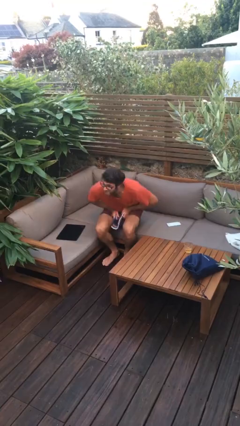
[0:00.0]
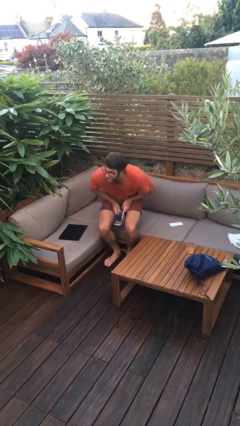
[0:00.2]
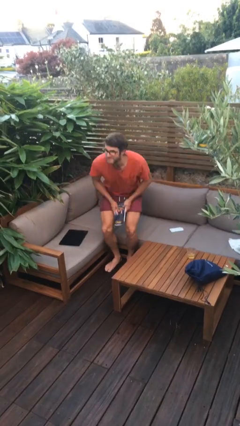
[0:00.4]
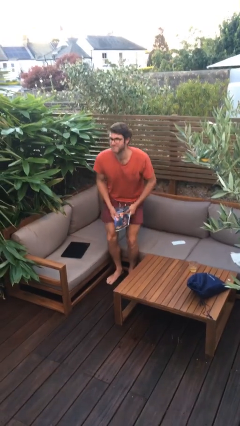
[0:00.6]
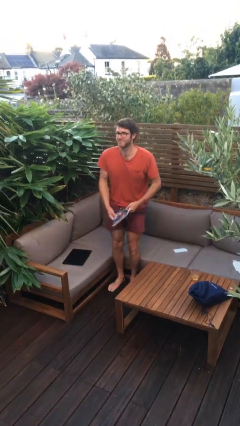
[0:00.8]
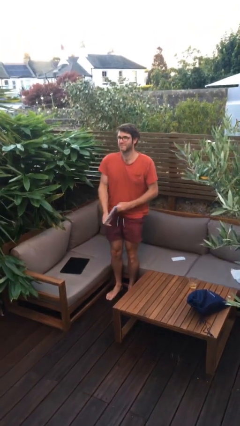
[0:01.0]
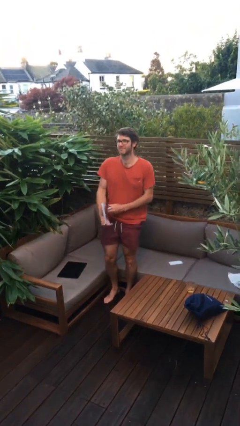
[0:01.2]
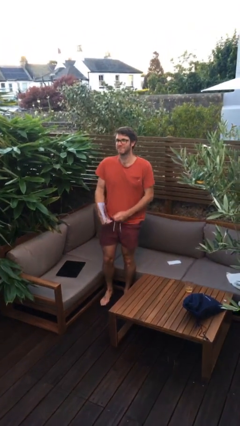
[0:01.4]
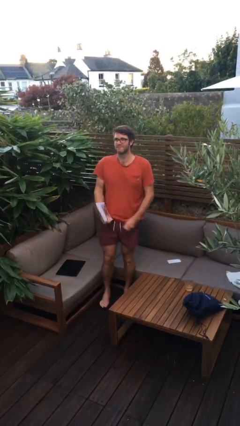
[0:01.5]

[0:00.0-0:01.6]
person stands up

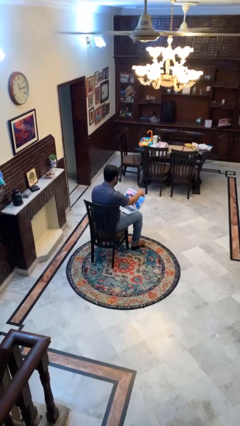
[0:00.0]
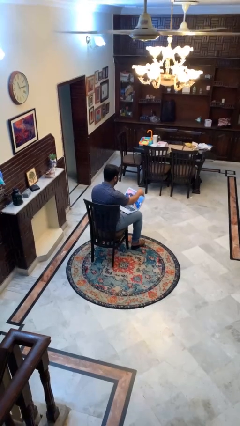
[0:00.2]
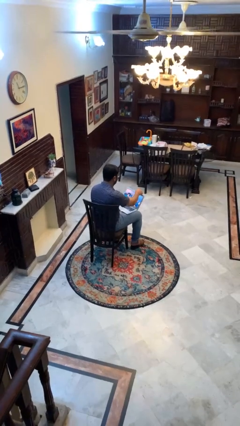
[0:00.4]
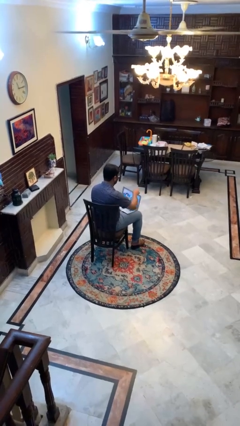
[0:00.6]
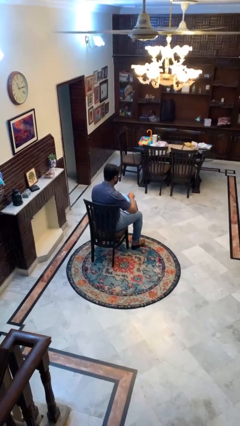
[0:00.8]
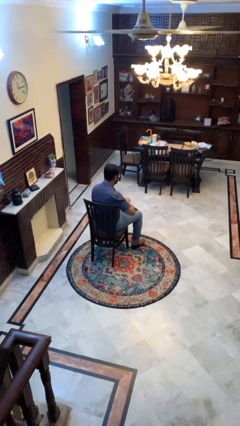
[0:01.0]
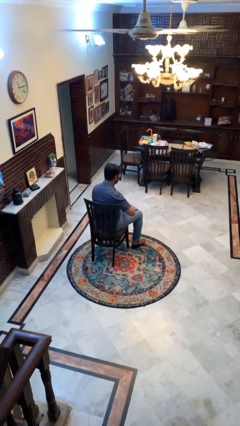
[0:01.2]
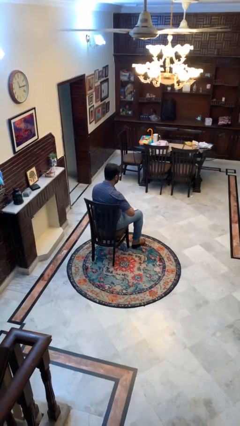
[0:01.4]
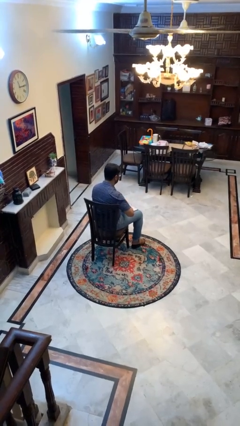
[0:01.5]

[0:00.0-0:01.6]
person closes laptop

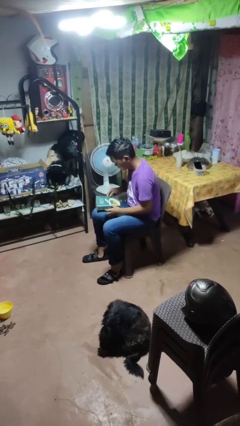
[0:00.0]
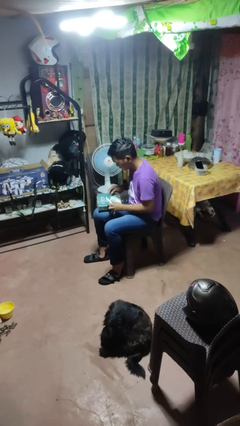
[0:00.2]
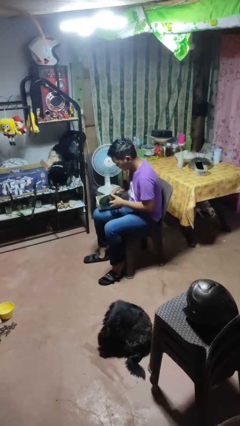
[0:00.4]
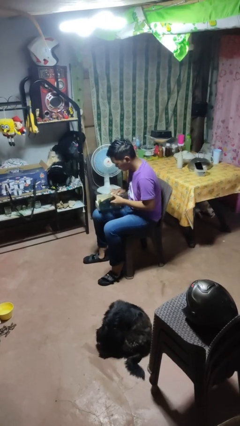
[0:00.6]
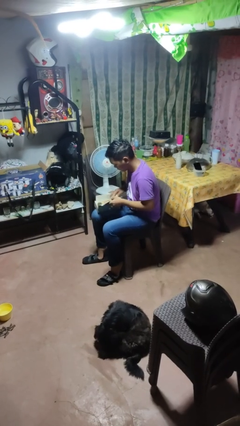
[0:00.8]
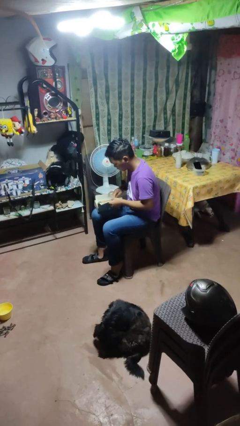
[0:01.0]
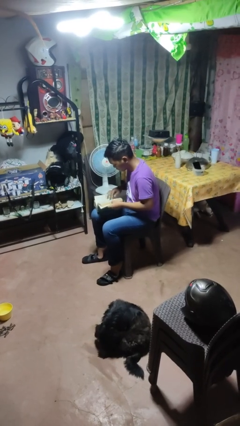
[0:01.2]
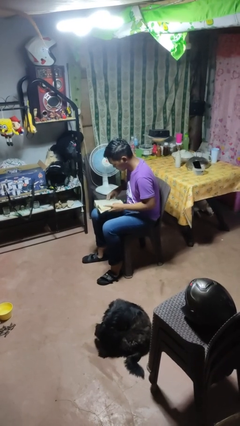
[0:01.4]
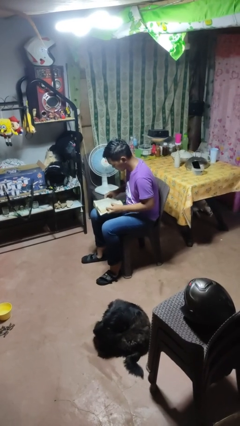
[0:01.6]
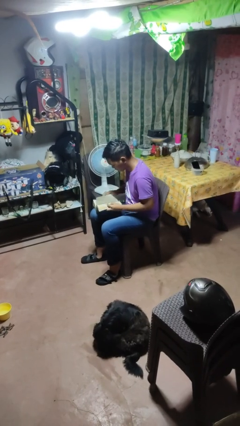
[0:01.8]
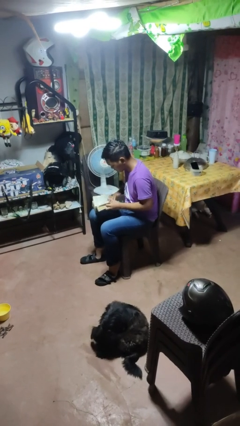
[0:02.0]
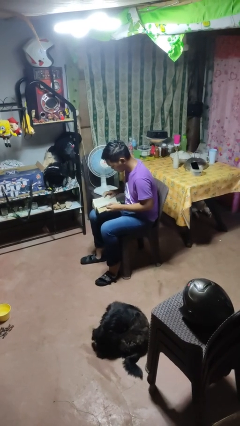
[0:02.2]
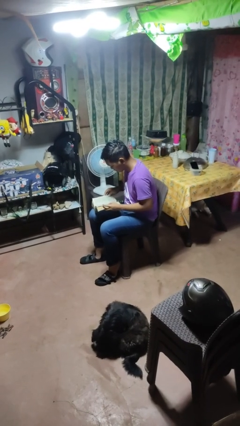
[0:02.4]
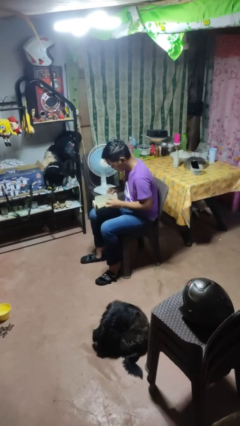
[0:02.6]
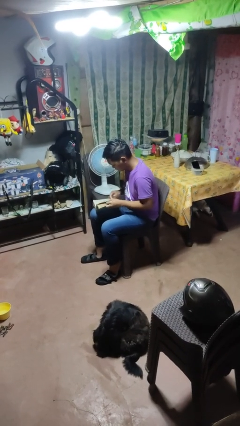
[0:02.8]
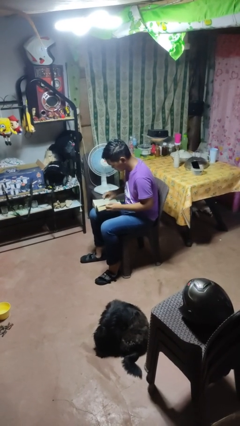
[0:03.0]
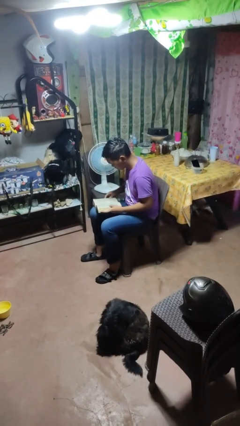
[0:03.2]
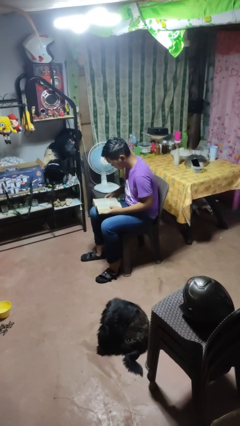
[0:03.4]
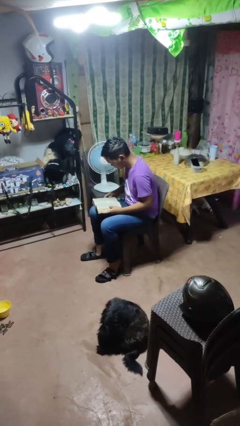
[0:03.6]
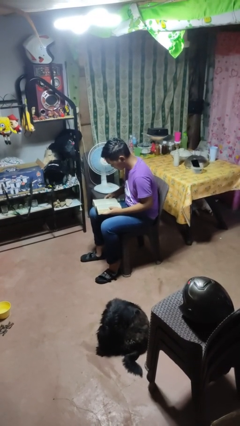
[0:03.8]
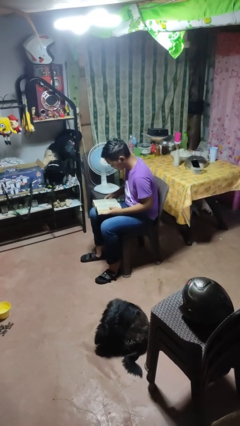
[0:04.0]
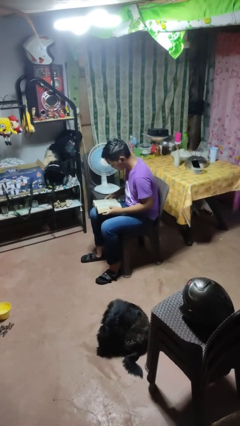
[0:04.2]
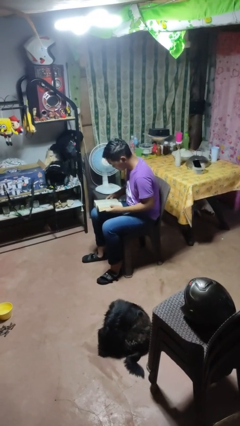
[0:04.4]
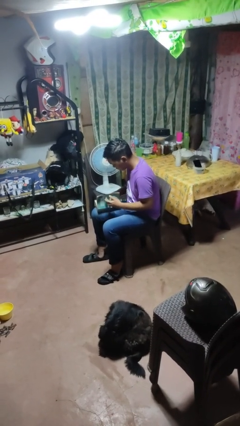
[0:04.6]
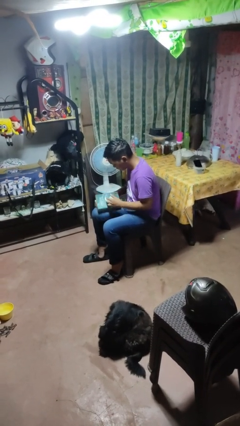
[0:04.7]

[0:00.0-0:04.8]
person reads book

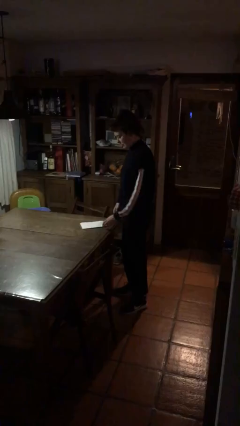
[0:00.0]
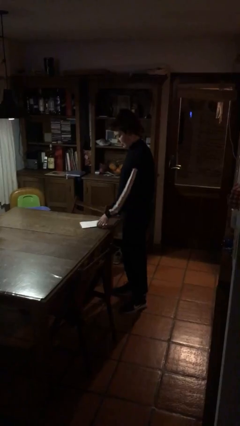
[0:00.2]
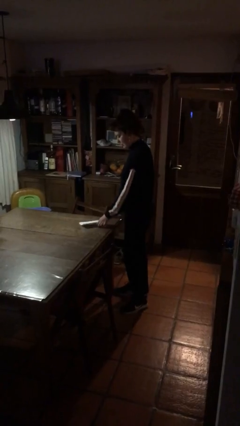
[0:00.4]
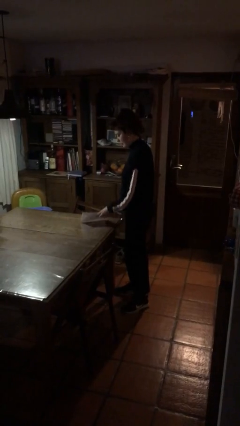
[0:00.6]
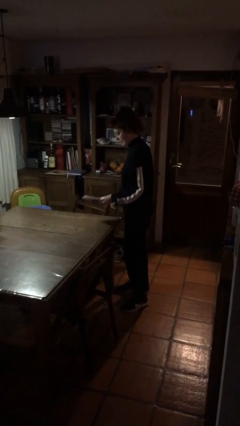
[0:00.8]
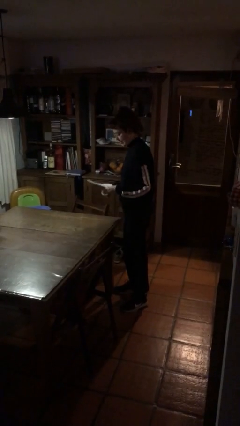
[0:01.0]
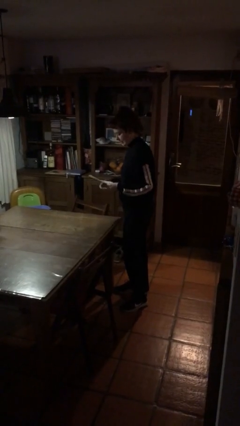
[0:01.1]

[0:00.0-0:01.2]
person picks up object from table

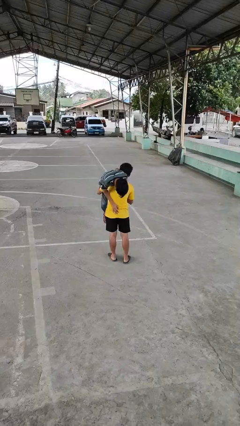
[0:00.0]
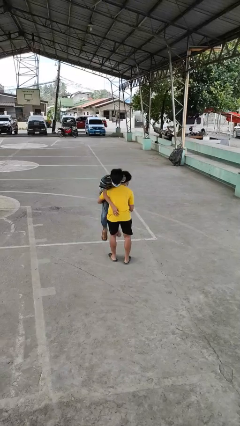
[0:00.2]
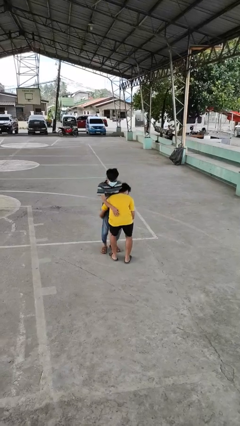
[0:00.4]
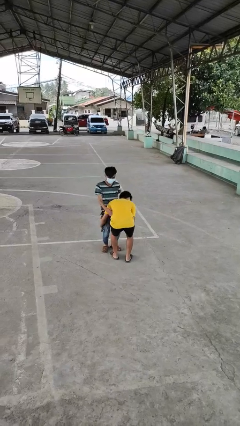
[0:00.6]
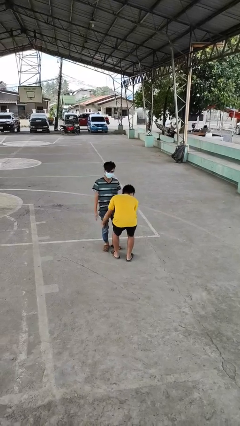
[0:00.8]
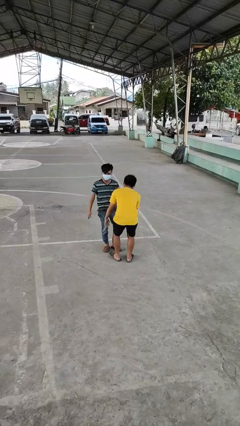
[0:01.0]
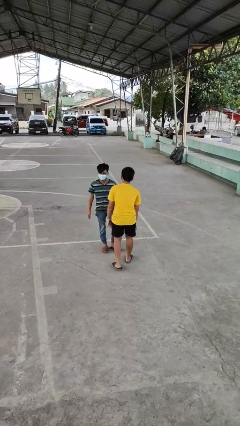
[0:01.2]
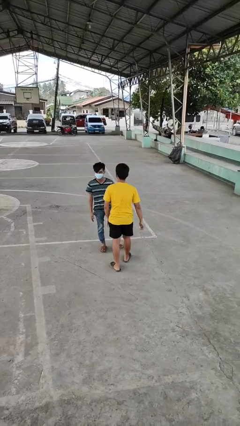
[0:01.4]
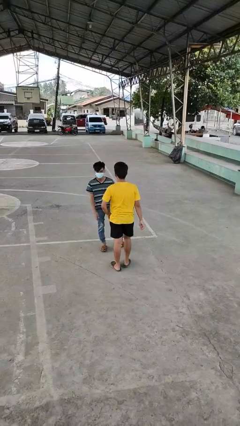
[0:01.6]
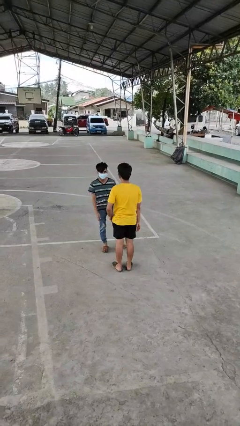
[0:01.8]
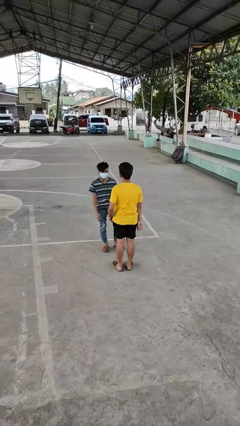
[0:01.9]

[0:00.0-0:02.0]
person puts down person

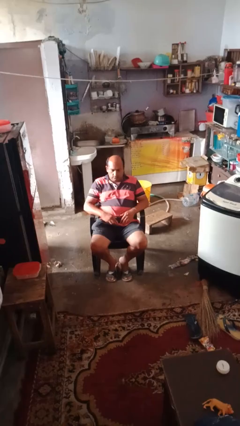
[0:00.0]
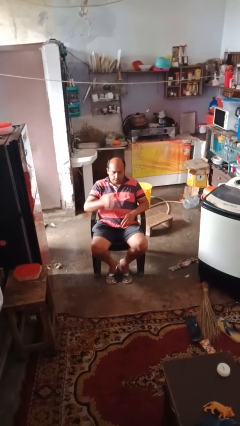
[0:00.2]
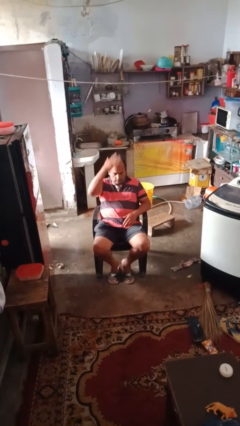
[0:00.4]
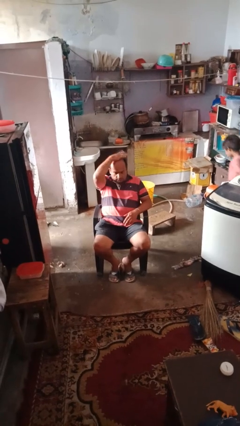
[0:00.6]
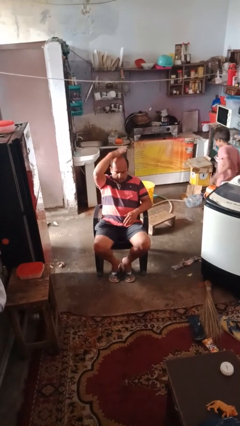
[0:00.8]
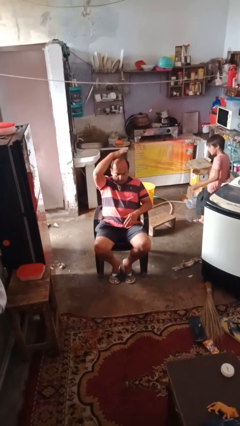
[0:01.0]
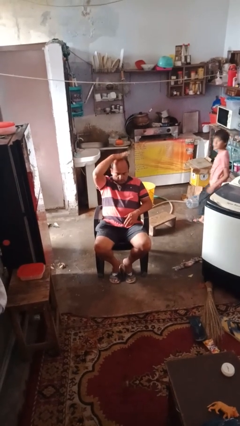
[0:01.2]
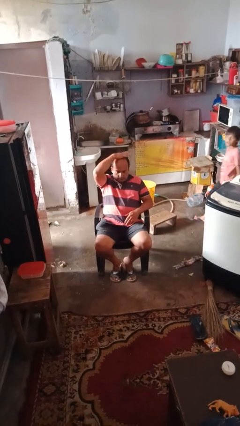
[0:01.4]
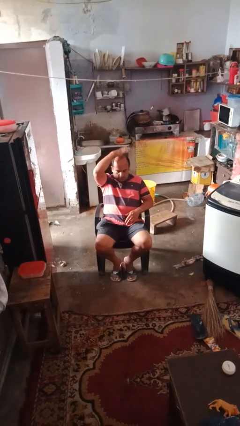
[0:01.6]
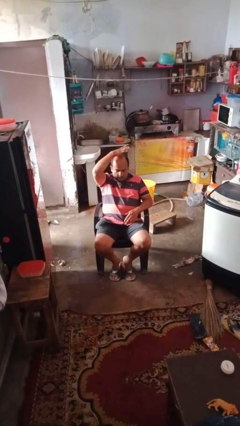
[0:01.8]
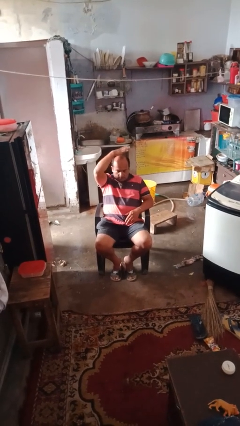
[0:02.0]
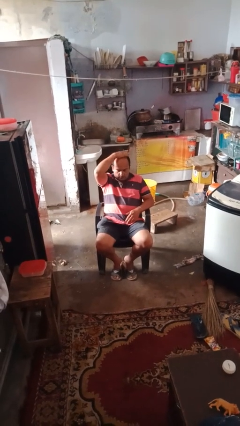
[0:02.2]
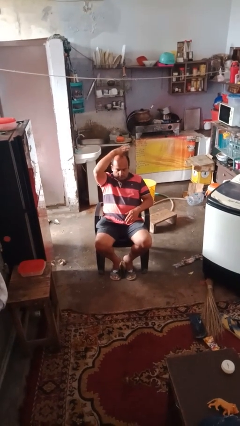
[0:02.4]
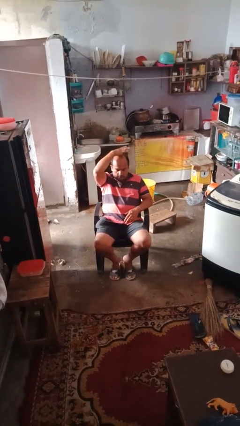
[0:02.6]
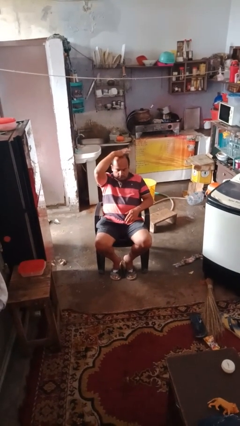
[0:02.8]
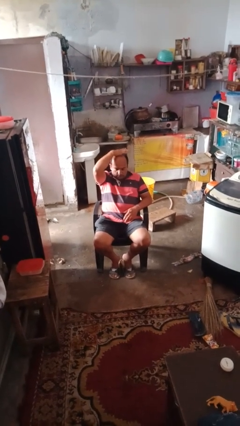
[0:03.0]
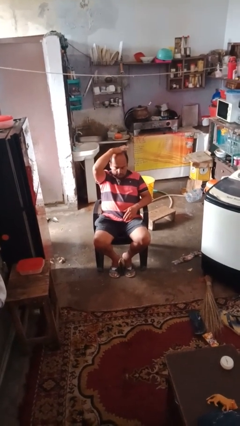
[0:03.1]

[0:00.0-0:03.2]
person holds object above head

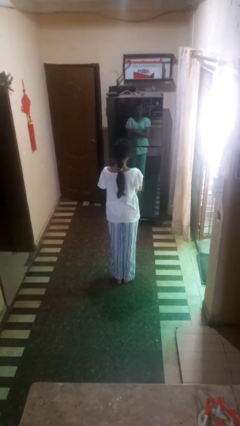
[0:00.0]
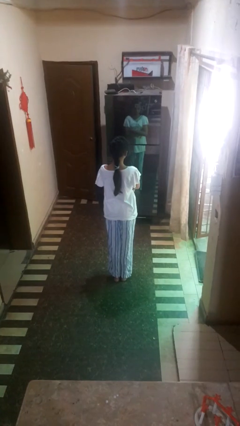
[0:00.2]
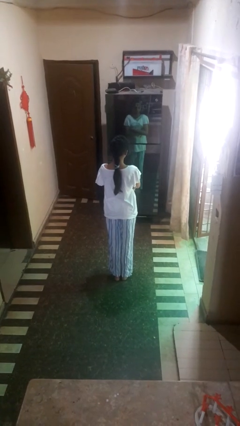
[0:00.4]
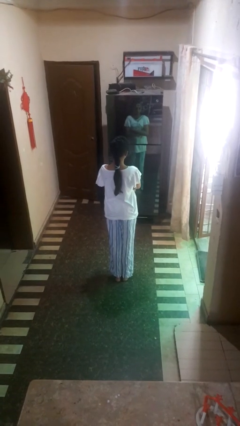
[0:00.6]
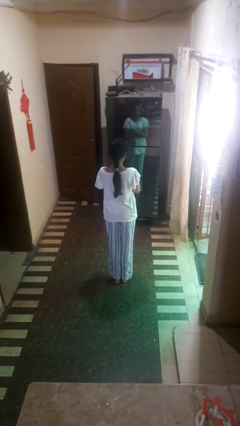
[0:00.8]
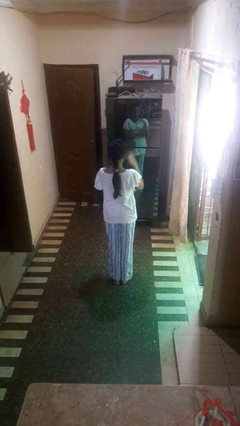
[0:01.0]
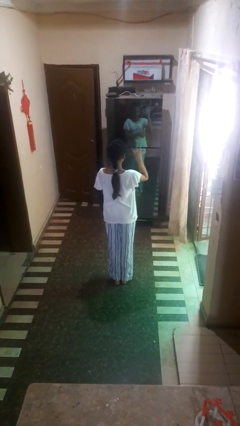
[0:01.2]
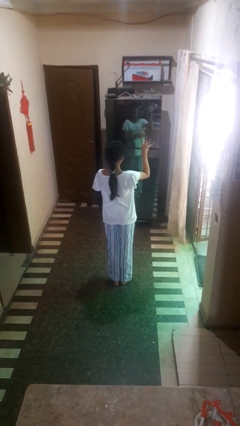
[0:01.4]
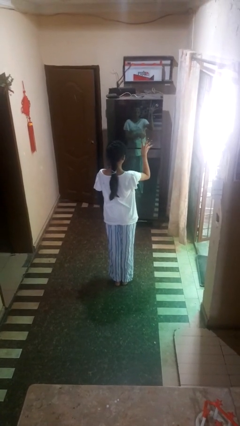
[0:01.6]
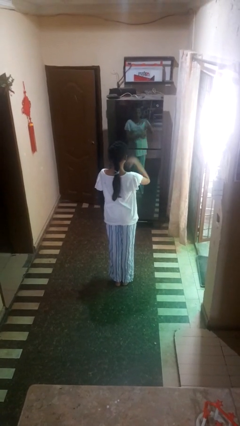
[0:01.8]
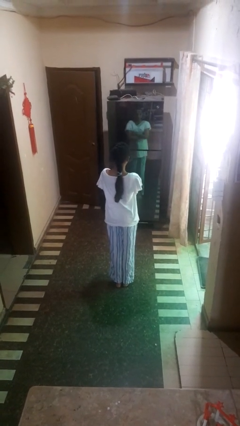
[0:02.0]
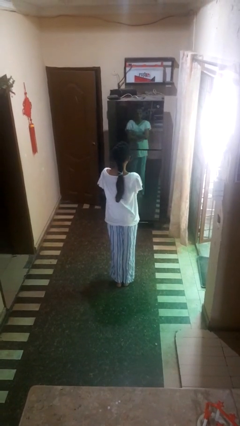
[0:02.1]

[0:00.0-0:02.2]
person gestures number four

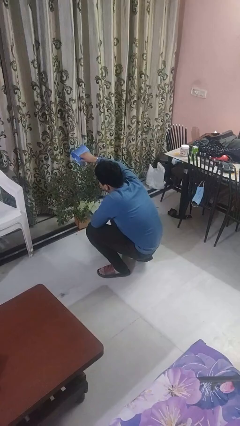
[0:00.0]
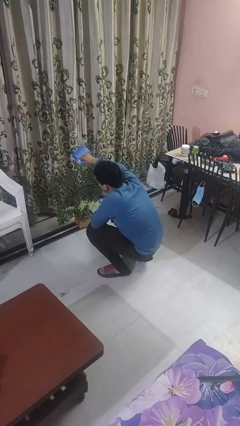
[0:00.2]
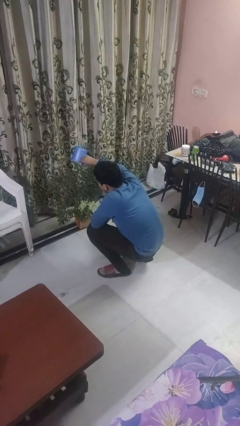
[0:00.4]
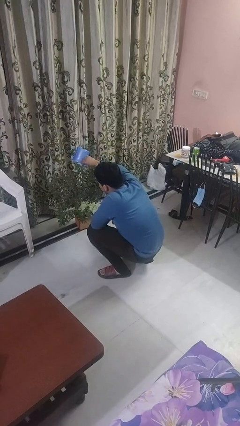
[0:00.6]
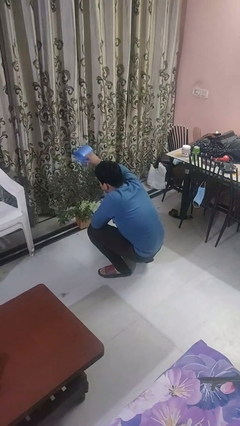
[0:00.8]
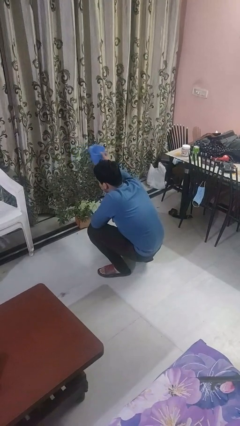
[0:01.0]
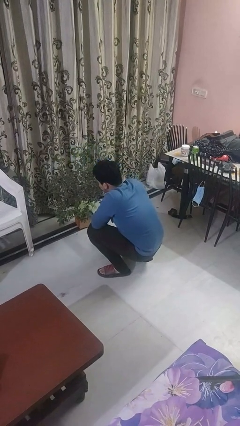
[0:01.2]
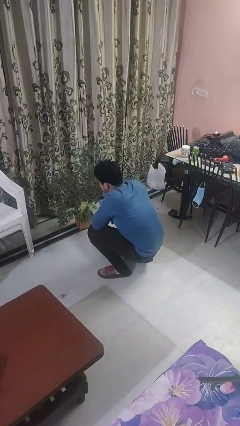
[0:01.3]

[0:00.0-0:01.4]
person waters houseplant
